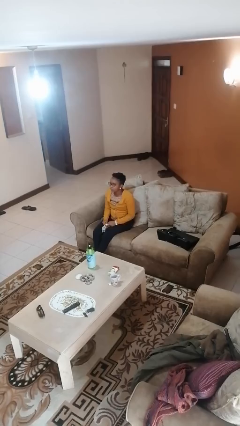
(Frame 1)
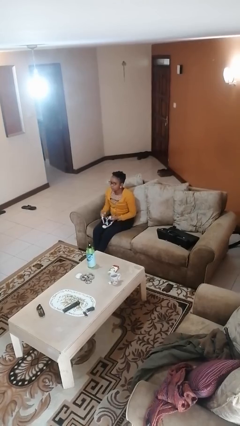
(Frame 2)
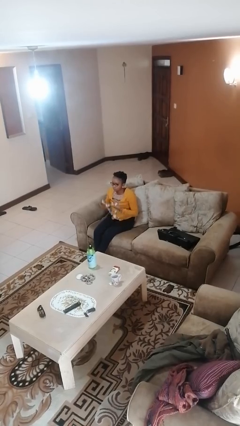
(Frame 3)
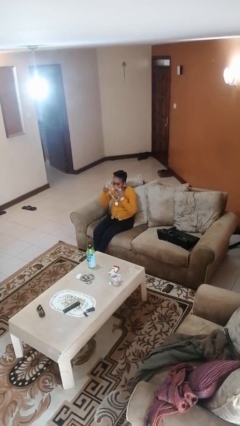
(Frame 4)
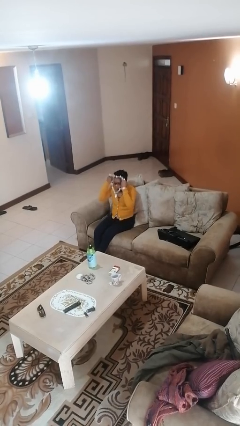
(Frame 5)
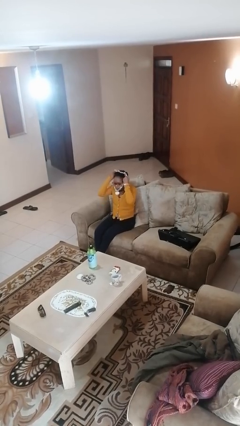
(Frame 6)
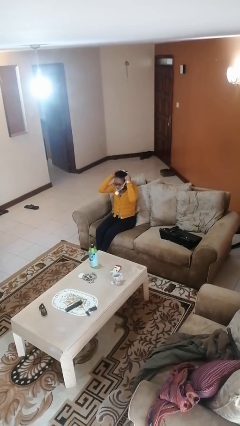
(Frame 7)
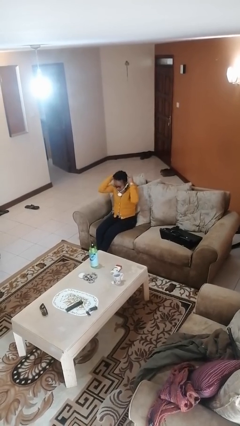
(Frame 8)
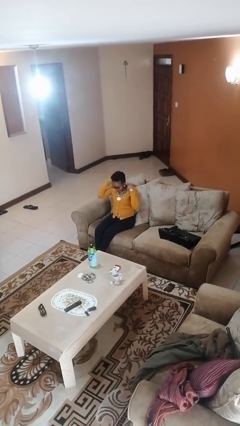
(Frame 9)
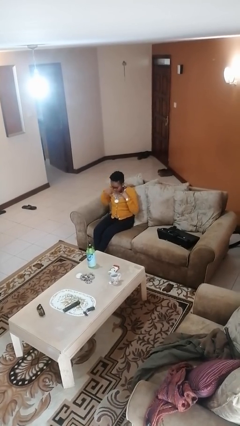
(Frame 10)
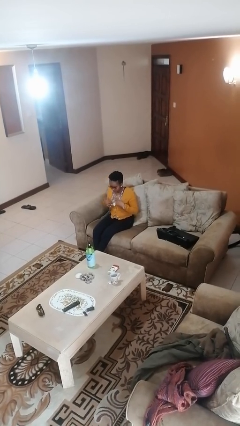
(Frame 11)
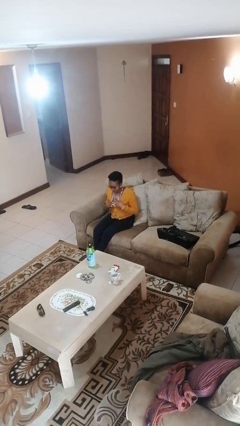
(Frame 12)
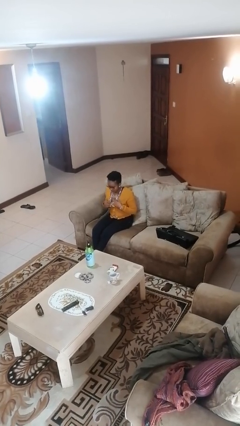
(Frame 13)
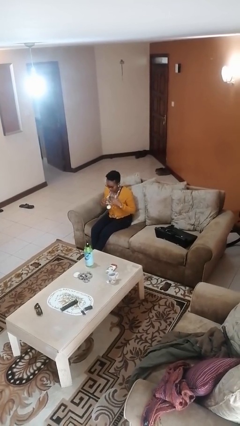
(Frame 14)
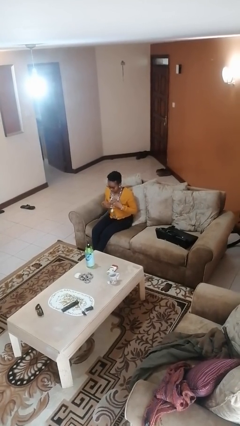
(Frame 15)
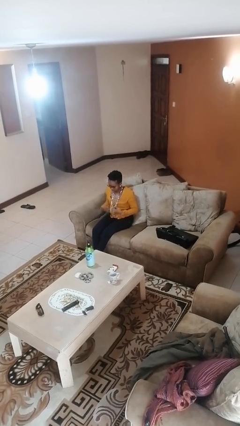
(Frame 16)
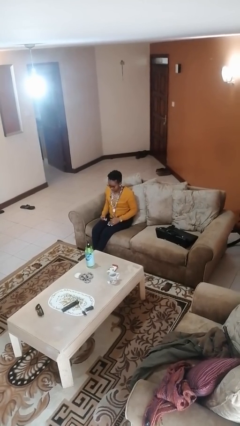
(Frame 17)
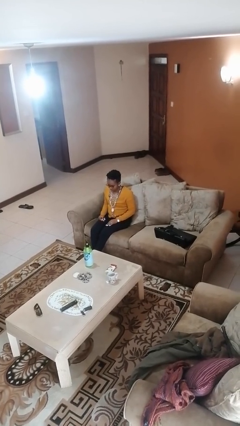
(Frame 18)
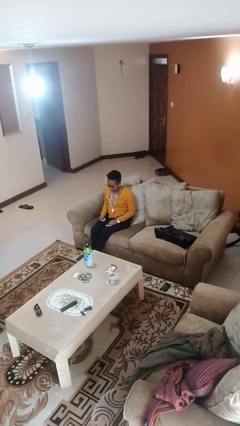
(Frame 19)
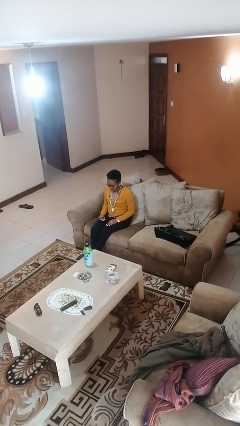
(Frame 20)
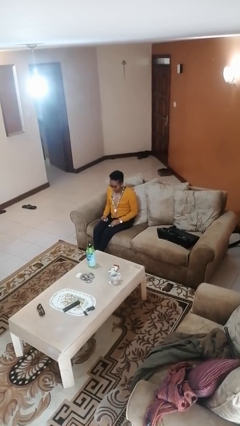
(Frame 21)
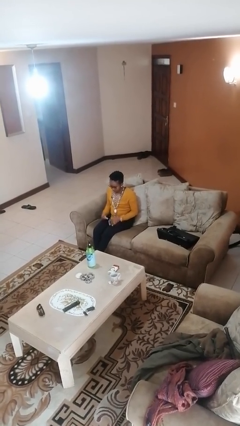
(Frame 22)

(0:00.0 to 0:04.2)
person puts on necklace

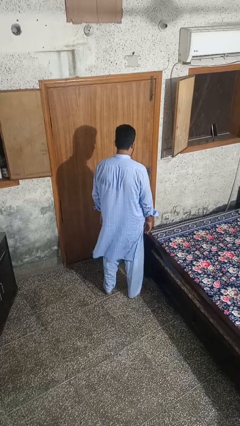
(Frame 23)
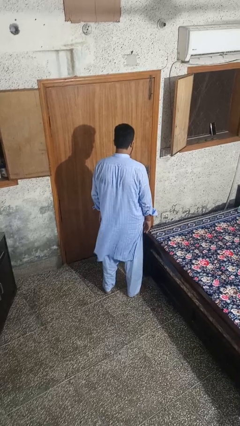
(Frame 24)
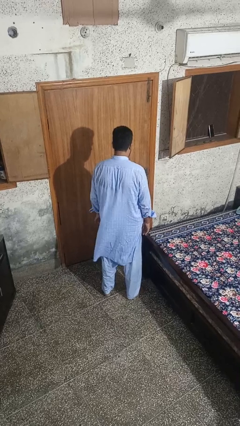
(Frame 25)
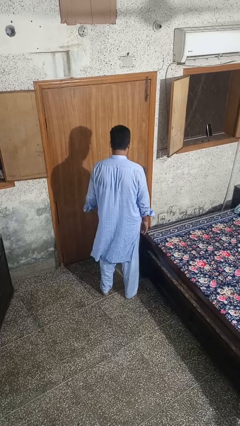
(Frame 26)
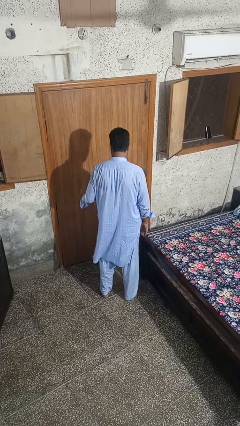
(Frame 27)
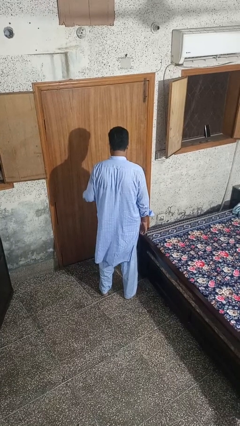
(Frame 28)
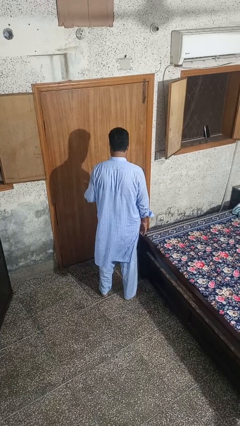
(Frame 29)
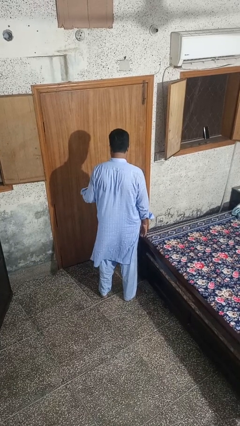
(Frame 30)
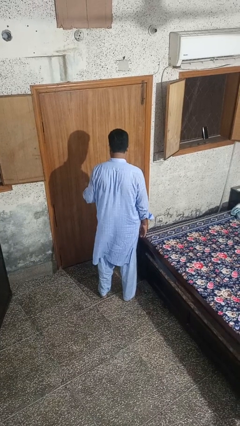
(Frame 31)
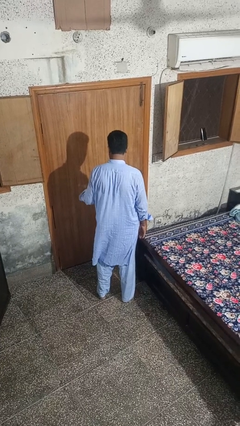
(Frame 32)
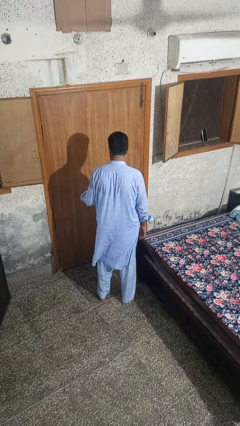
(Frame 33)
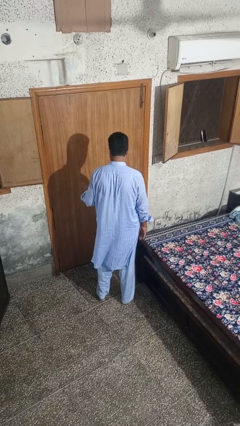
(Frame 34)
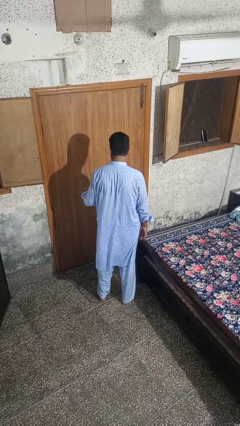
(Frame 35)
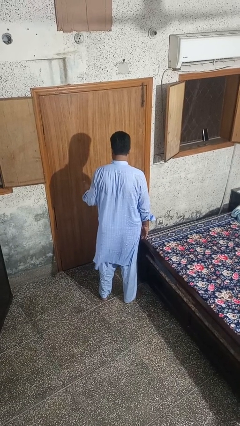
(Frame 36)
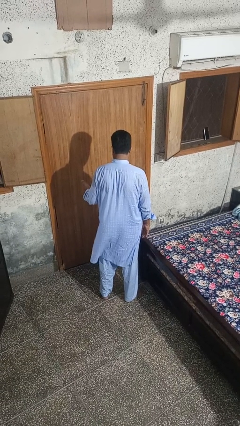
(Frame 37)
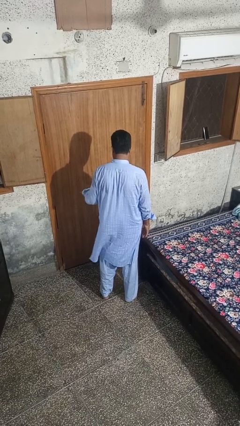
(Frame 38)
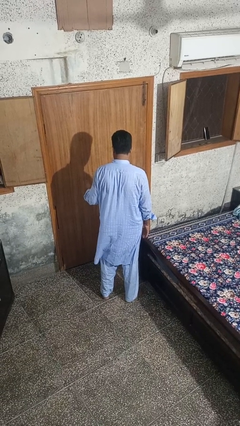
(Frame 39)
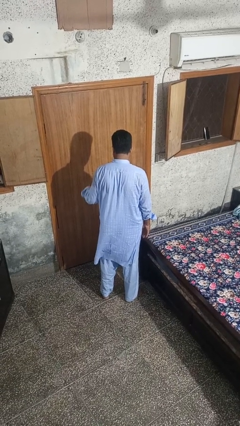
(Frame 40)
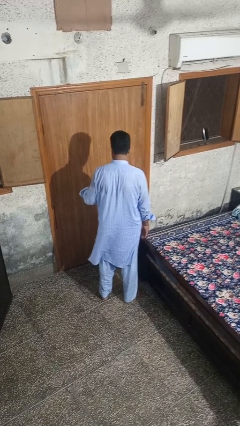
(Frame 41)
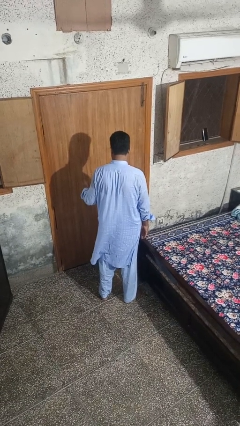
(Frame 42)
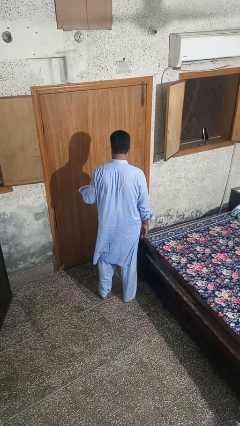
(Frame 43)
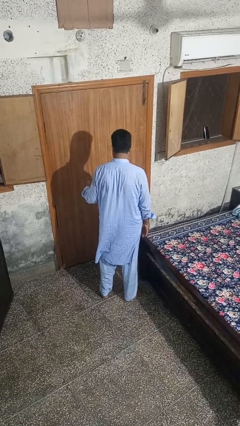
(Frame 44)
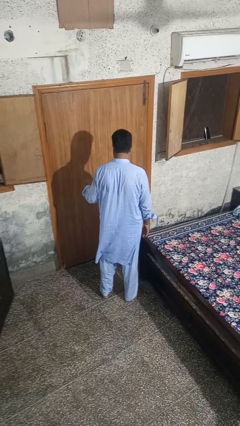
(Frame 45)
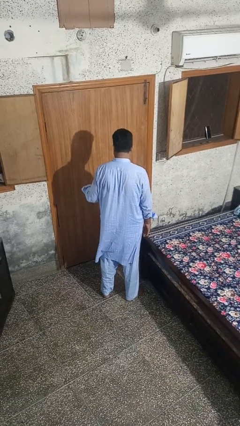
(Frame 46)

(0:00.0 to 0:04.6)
person gestures hang loose

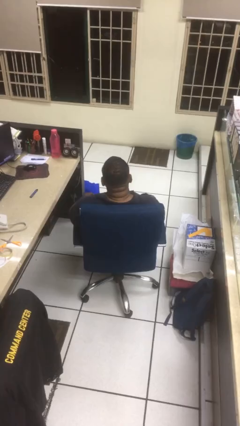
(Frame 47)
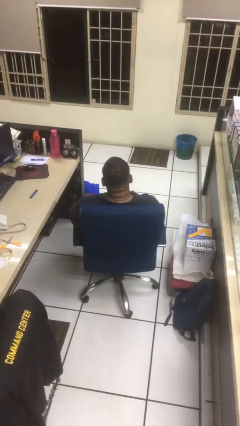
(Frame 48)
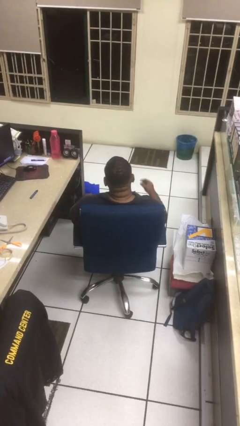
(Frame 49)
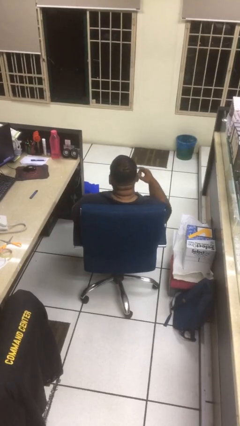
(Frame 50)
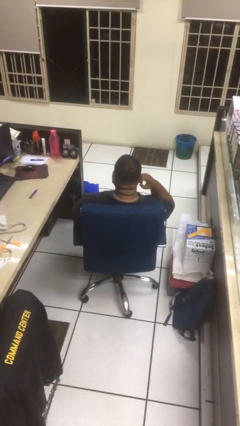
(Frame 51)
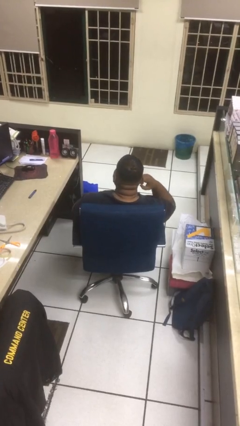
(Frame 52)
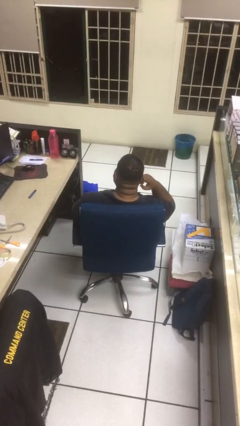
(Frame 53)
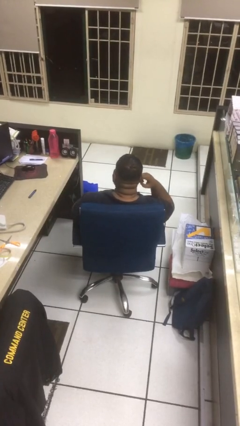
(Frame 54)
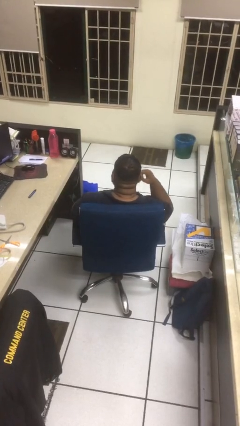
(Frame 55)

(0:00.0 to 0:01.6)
person gestures listen closely

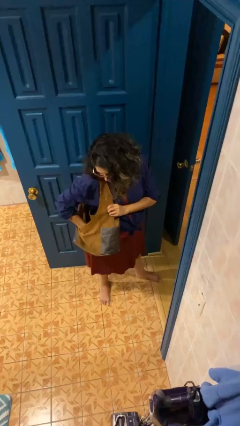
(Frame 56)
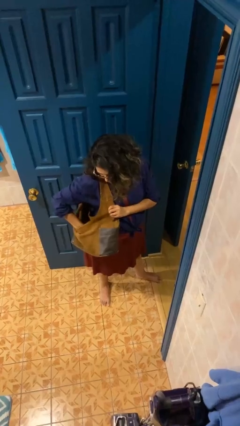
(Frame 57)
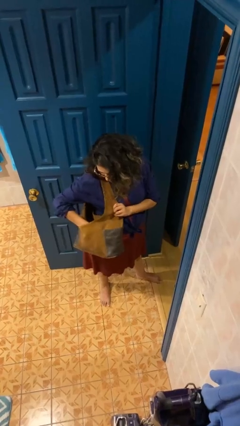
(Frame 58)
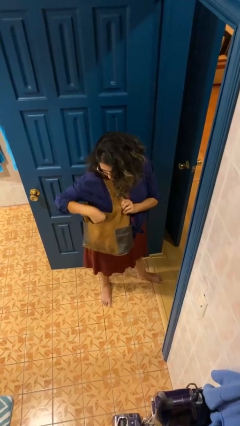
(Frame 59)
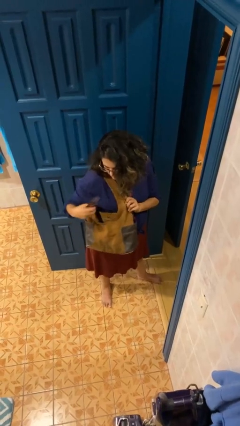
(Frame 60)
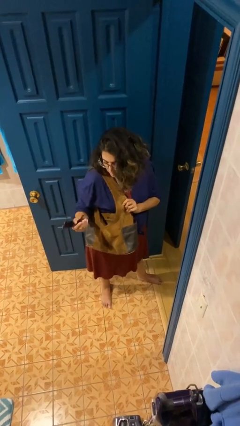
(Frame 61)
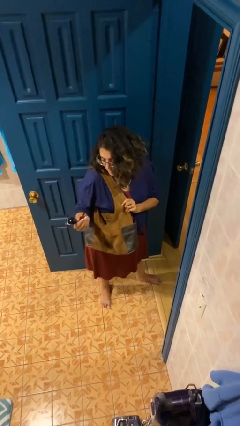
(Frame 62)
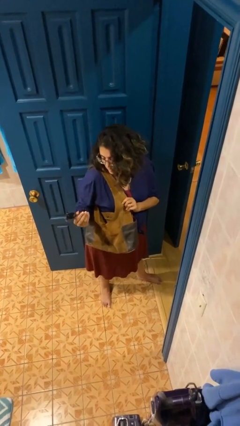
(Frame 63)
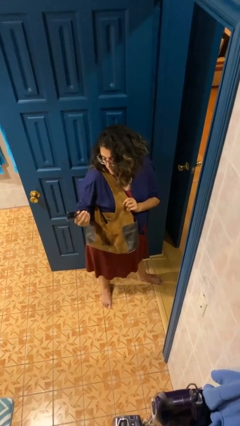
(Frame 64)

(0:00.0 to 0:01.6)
person takes object from purse

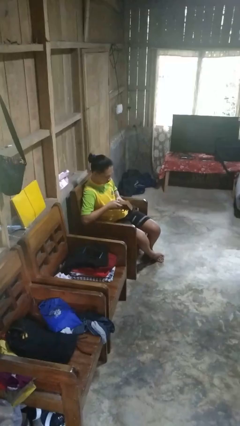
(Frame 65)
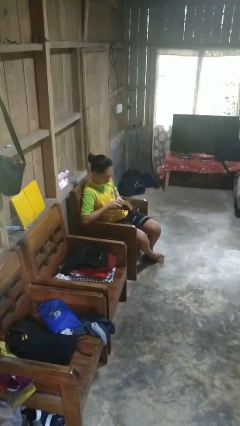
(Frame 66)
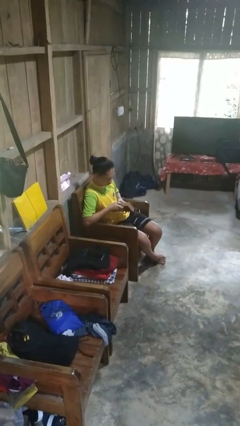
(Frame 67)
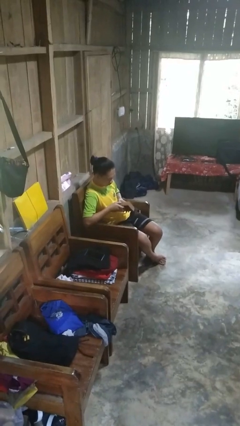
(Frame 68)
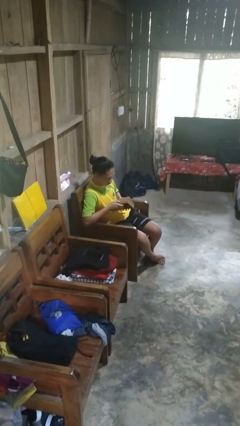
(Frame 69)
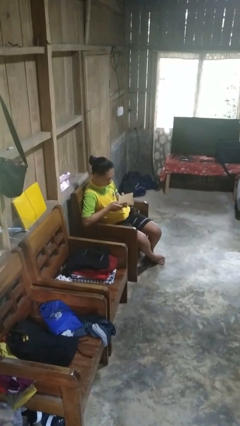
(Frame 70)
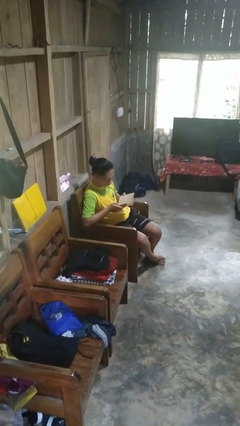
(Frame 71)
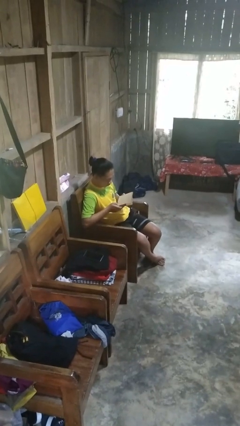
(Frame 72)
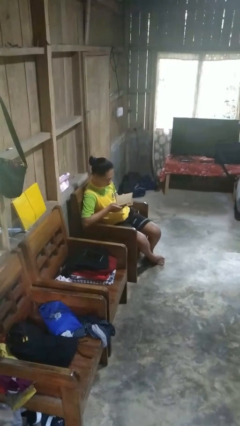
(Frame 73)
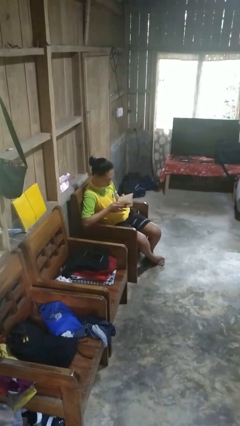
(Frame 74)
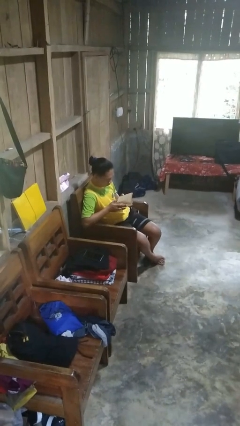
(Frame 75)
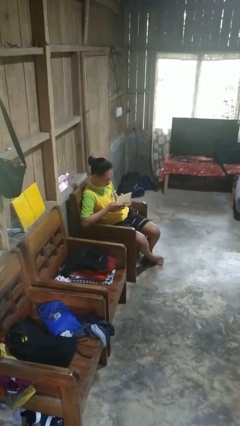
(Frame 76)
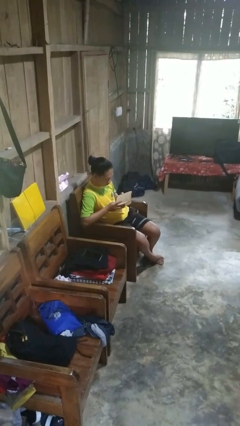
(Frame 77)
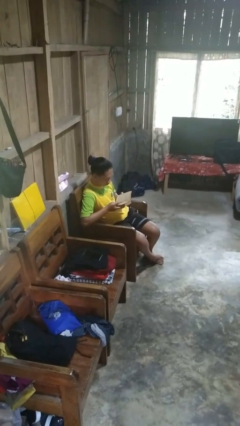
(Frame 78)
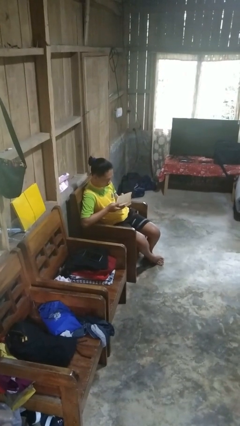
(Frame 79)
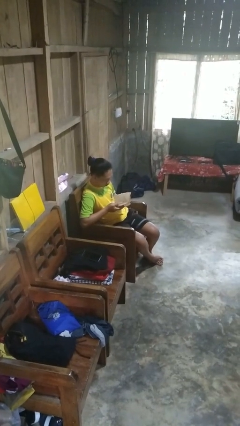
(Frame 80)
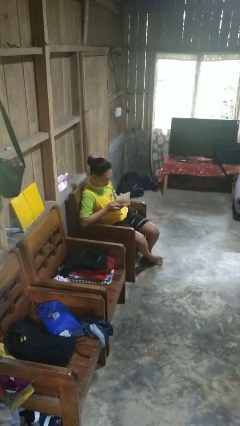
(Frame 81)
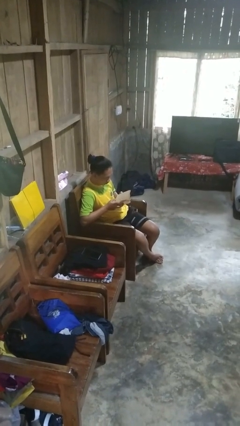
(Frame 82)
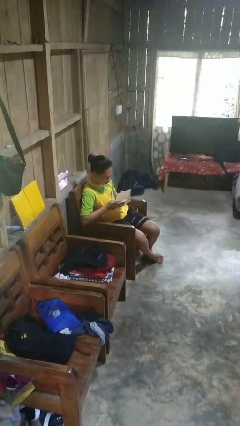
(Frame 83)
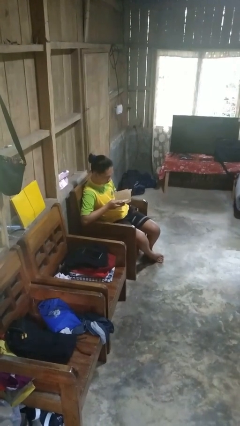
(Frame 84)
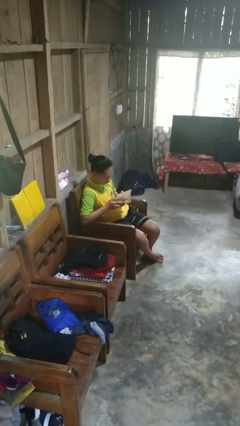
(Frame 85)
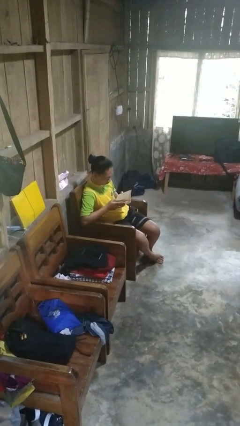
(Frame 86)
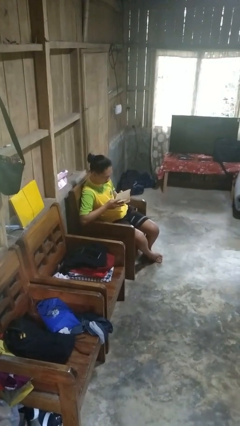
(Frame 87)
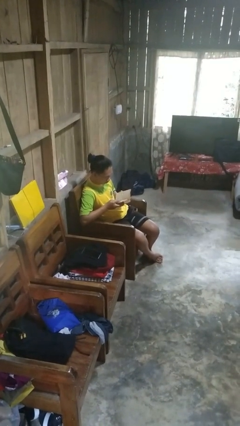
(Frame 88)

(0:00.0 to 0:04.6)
person reads book

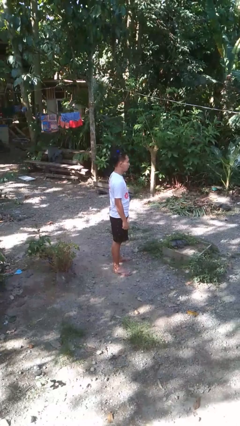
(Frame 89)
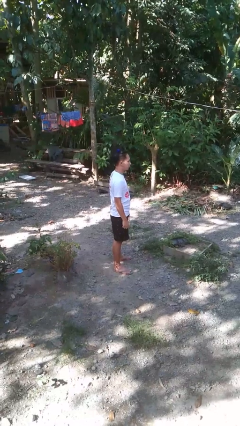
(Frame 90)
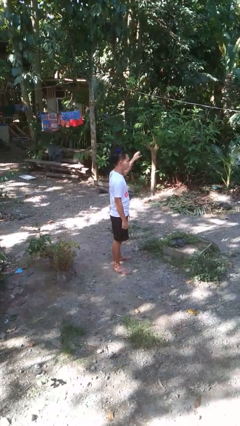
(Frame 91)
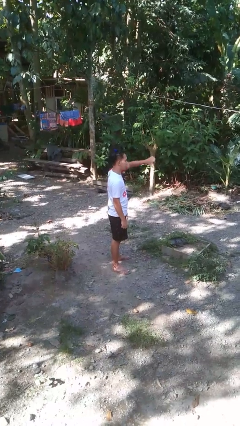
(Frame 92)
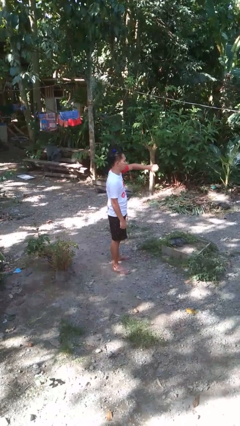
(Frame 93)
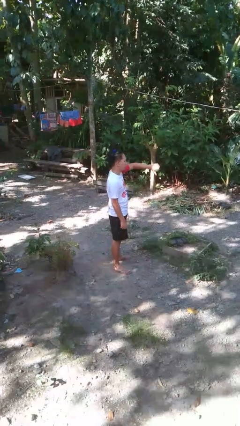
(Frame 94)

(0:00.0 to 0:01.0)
person gestures thumbs down
